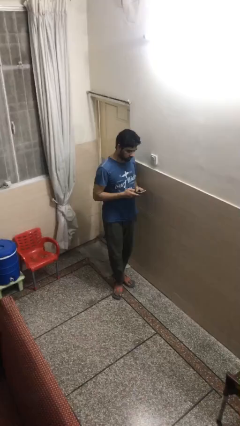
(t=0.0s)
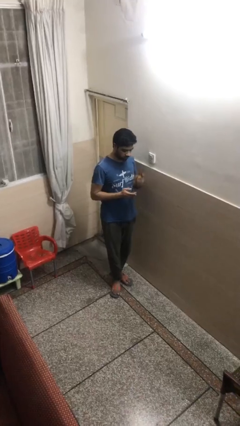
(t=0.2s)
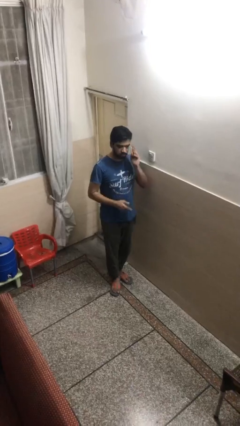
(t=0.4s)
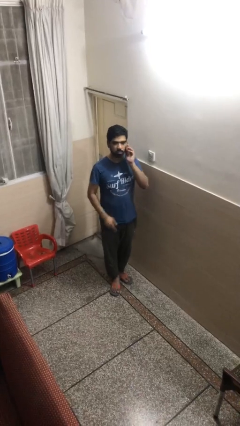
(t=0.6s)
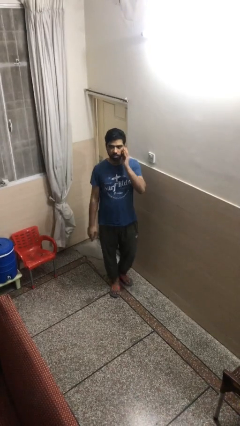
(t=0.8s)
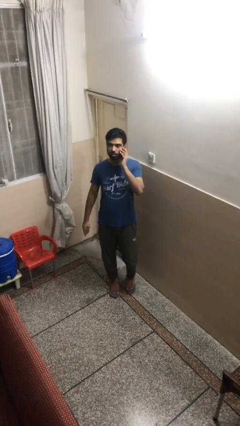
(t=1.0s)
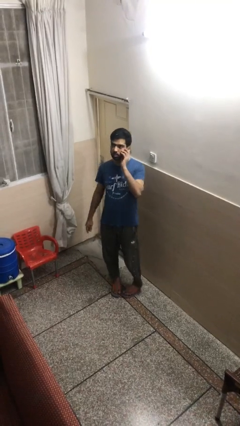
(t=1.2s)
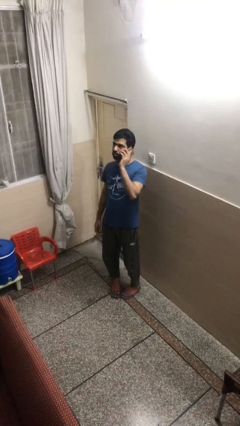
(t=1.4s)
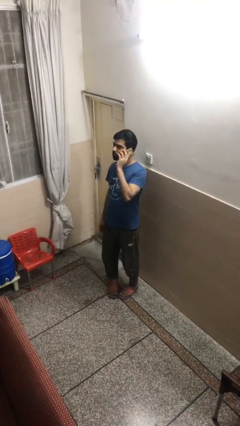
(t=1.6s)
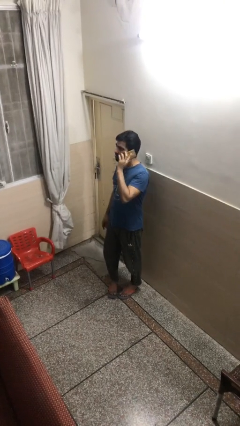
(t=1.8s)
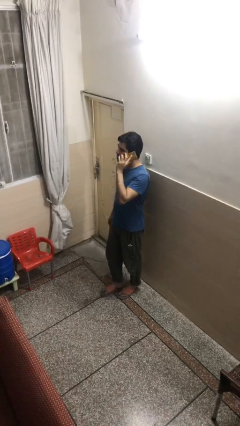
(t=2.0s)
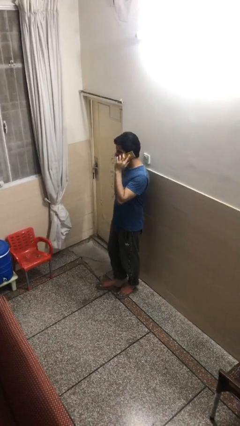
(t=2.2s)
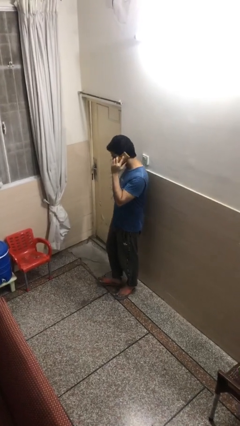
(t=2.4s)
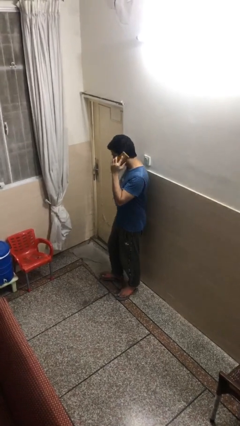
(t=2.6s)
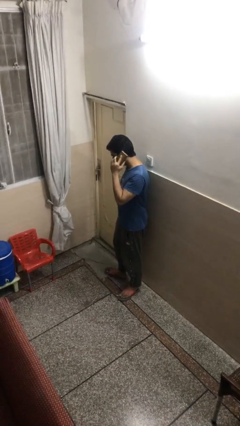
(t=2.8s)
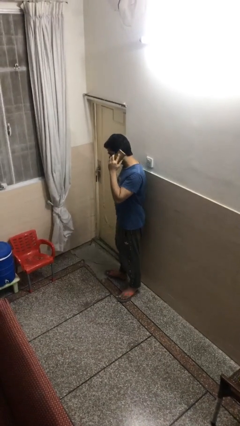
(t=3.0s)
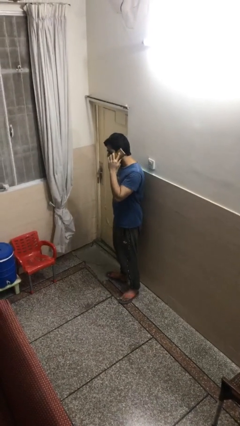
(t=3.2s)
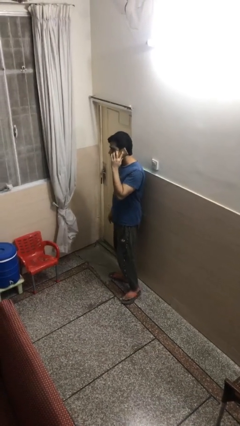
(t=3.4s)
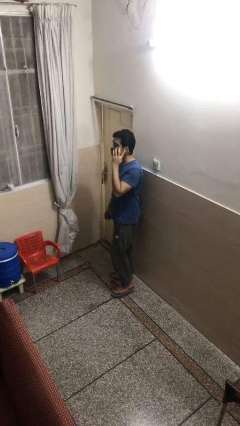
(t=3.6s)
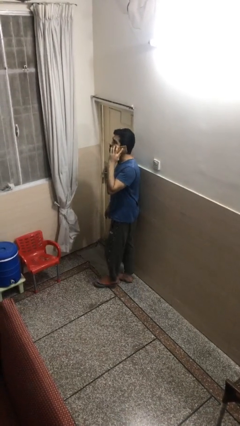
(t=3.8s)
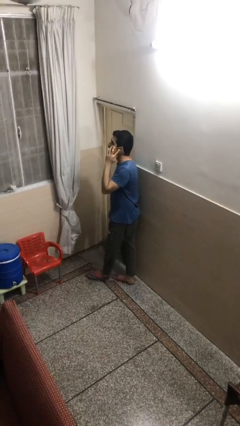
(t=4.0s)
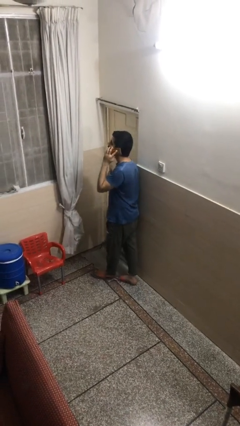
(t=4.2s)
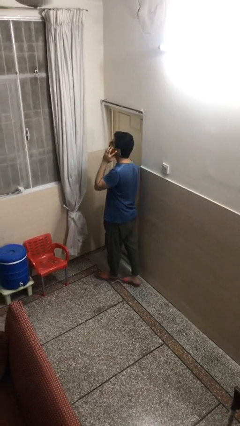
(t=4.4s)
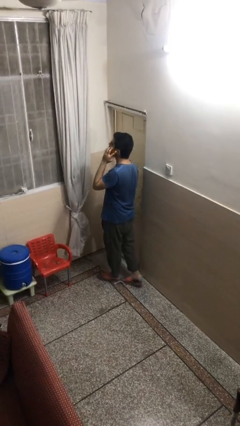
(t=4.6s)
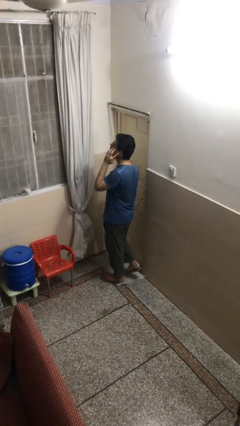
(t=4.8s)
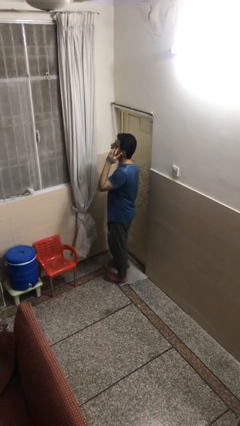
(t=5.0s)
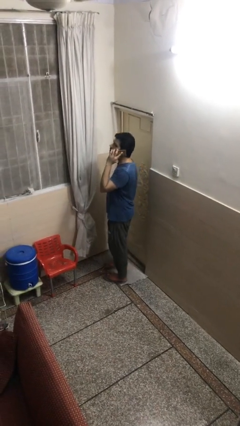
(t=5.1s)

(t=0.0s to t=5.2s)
person talks on phone

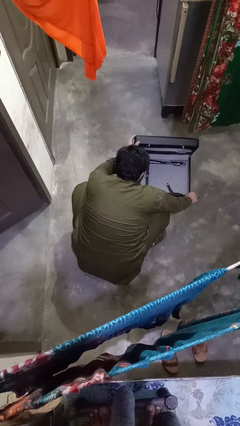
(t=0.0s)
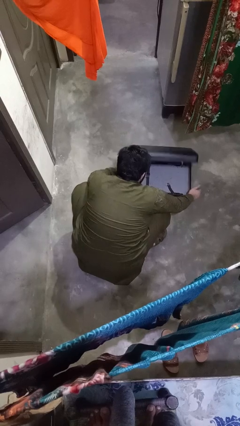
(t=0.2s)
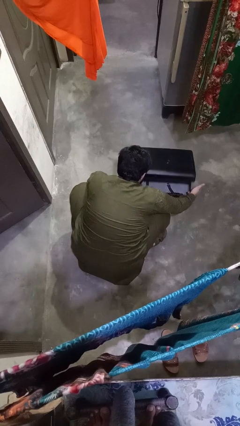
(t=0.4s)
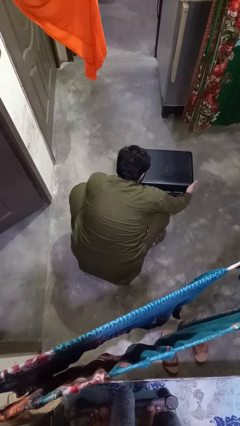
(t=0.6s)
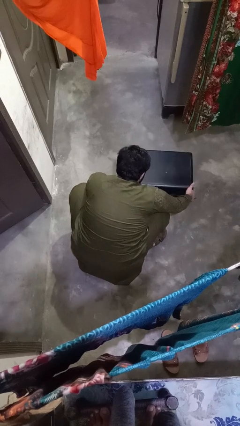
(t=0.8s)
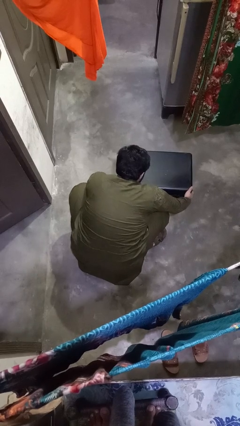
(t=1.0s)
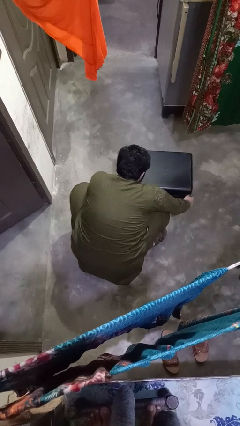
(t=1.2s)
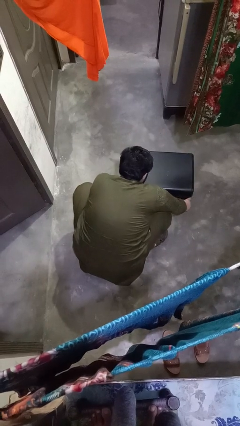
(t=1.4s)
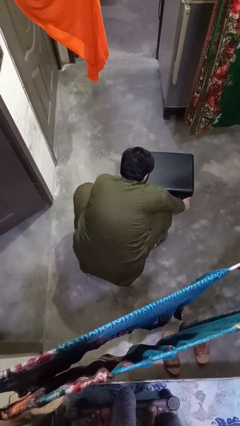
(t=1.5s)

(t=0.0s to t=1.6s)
person closes suitcase

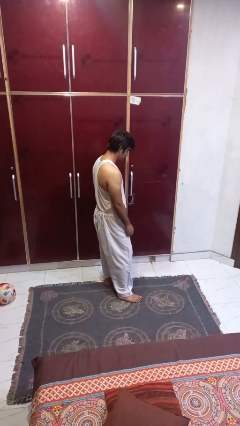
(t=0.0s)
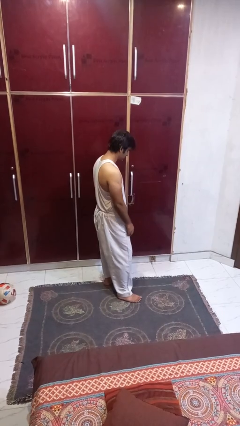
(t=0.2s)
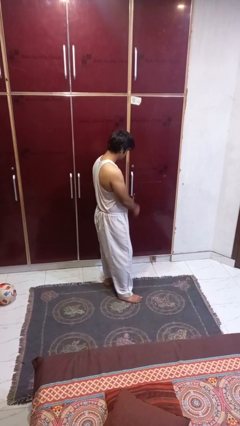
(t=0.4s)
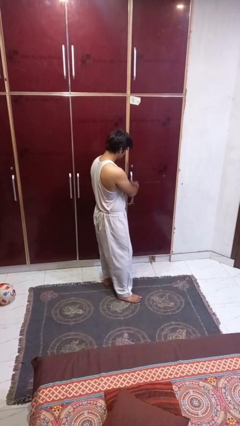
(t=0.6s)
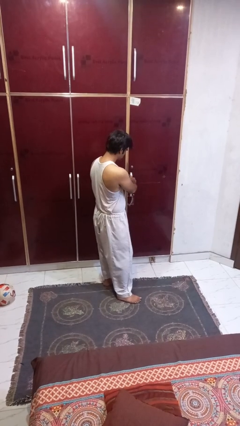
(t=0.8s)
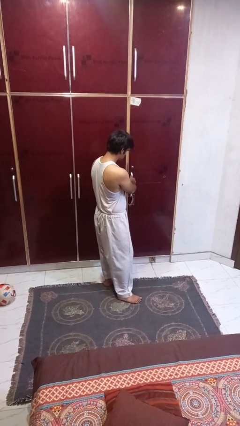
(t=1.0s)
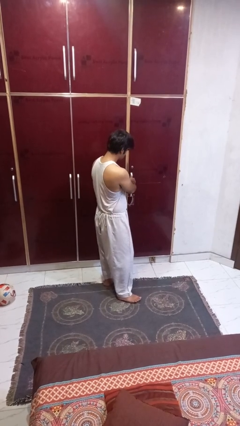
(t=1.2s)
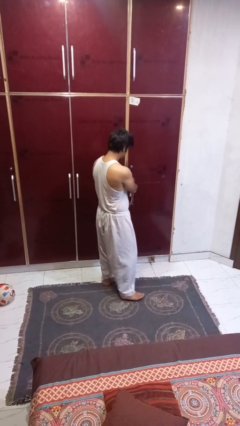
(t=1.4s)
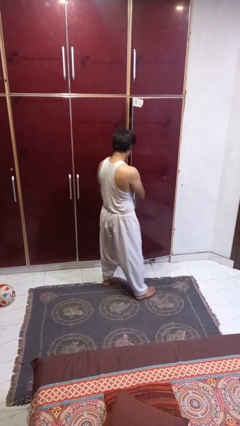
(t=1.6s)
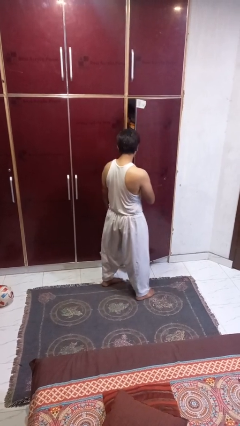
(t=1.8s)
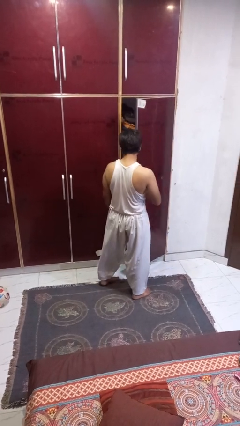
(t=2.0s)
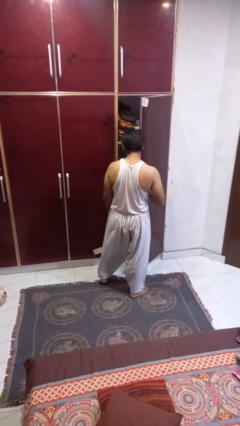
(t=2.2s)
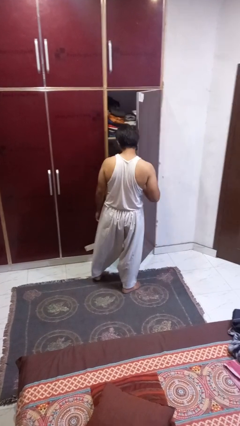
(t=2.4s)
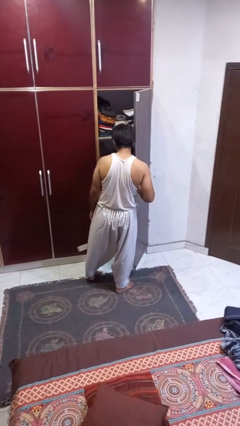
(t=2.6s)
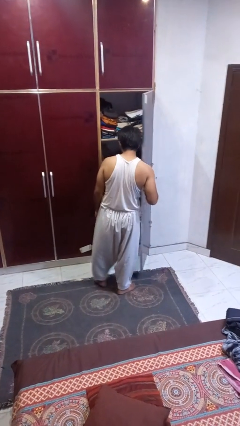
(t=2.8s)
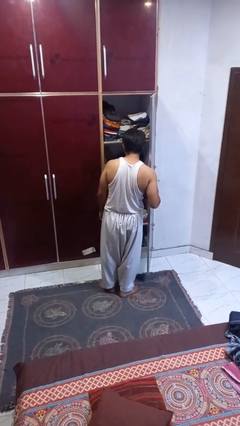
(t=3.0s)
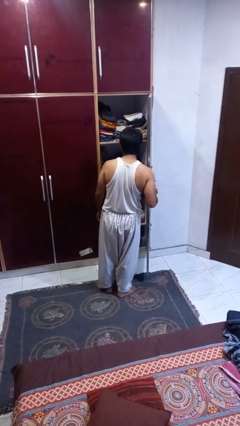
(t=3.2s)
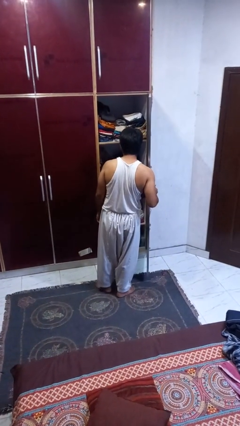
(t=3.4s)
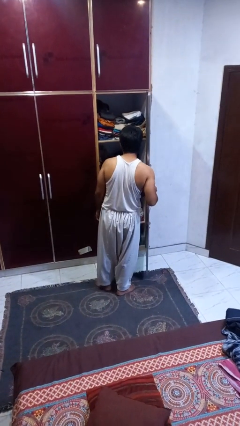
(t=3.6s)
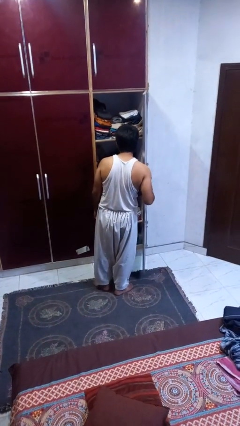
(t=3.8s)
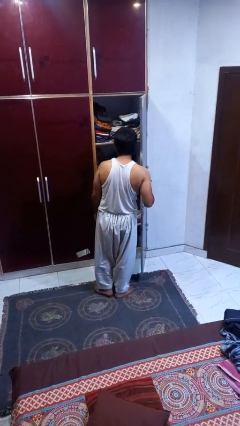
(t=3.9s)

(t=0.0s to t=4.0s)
person opens closet door

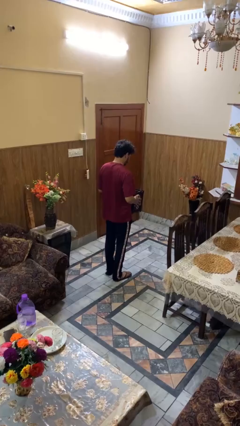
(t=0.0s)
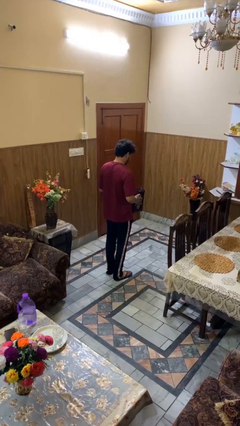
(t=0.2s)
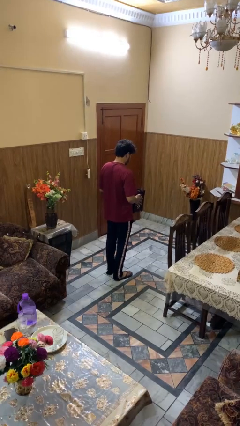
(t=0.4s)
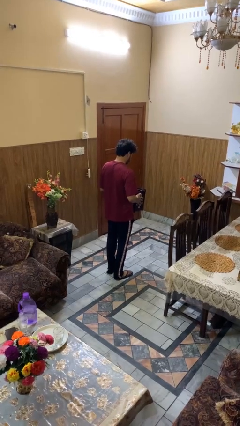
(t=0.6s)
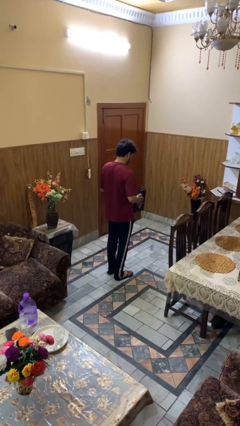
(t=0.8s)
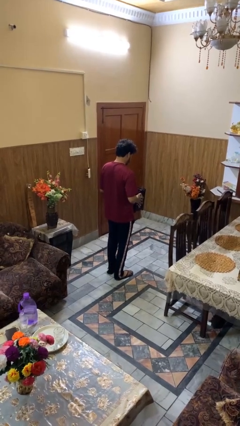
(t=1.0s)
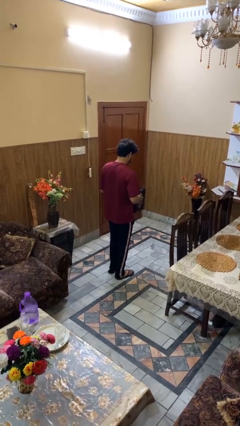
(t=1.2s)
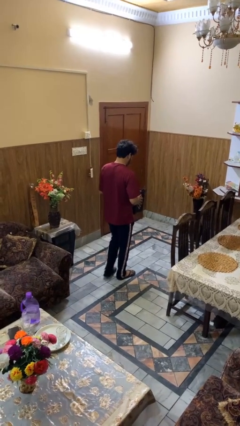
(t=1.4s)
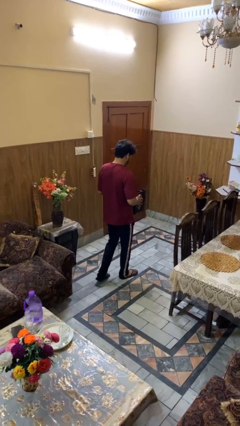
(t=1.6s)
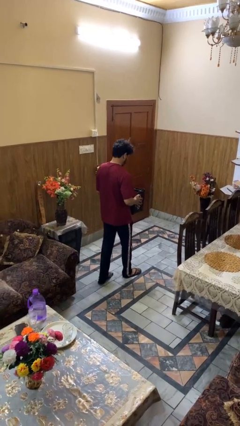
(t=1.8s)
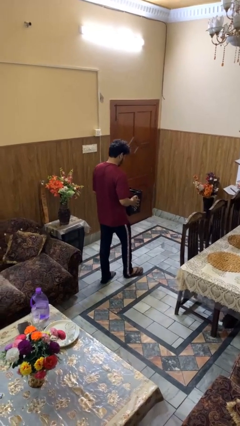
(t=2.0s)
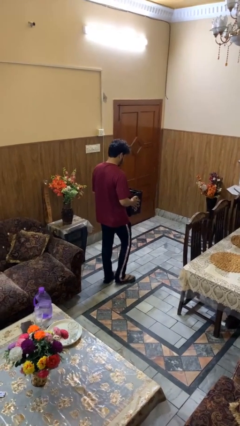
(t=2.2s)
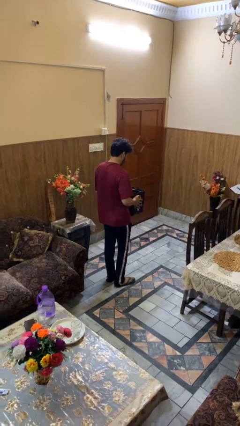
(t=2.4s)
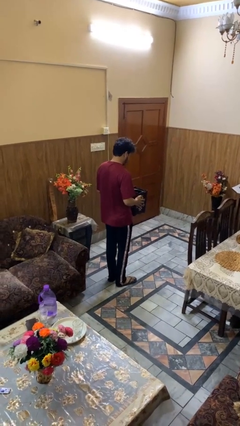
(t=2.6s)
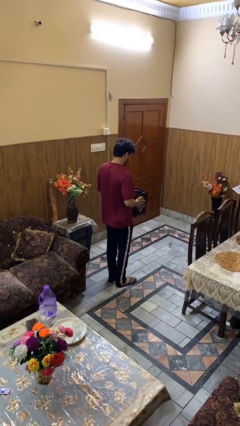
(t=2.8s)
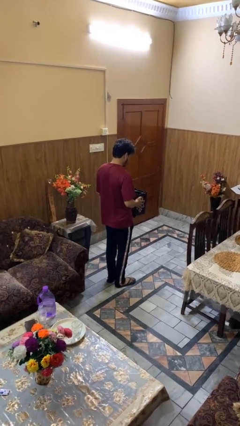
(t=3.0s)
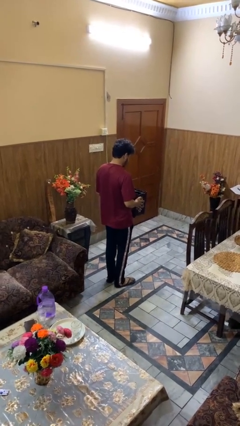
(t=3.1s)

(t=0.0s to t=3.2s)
person carries groceries

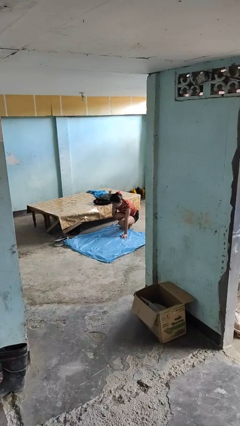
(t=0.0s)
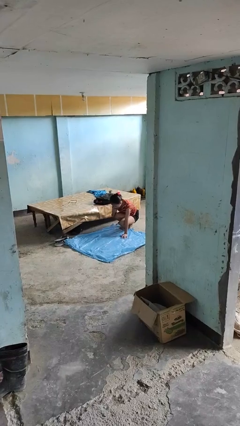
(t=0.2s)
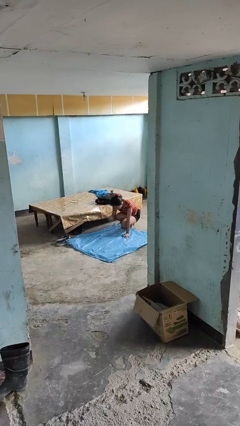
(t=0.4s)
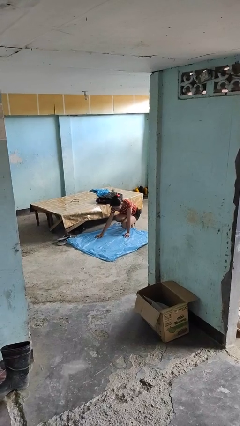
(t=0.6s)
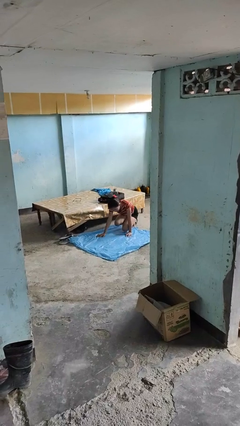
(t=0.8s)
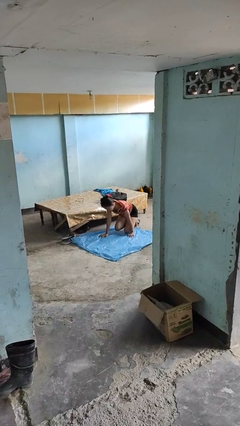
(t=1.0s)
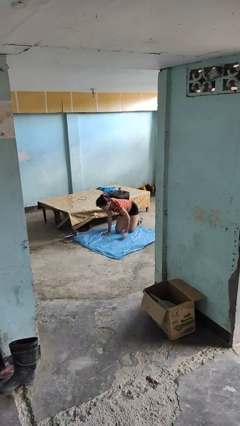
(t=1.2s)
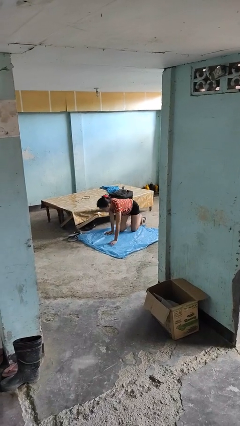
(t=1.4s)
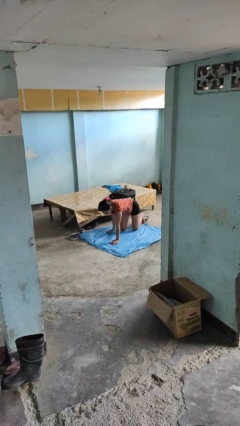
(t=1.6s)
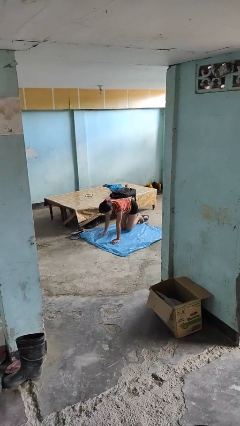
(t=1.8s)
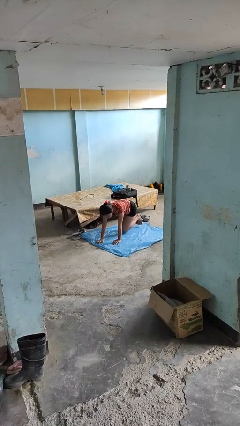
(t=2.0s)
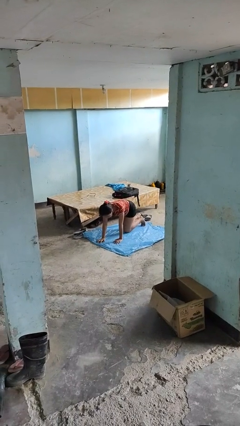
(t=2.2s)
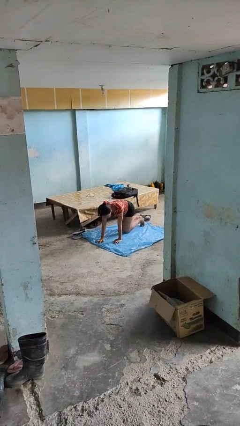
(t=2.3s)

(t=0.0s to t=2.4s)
person crawls

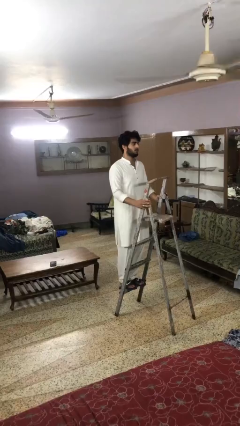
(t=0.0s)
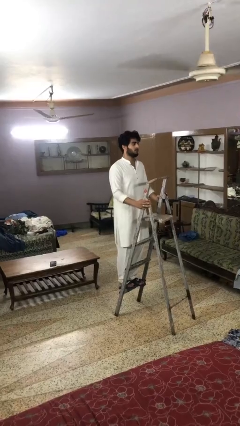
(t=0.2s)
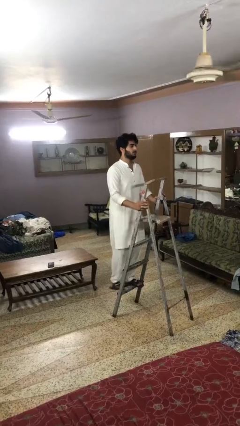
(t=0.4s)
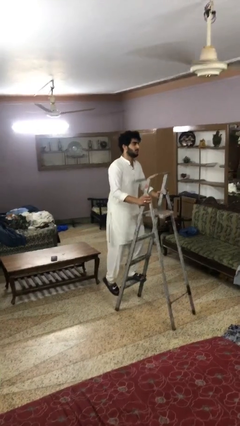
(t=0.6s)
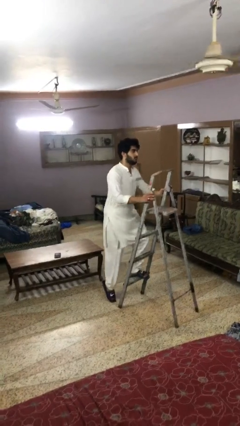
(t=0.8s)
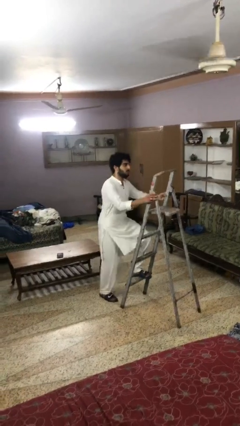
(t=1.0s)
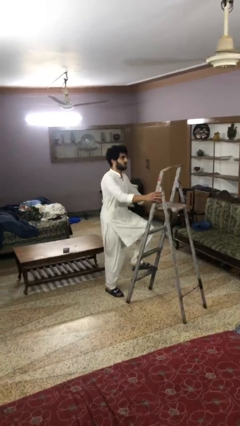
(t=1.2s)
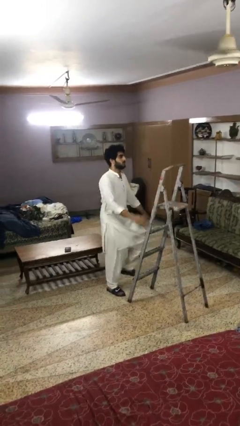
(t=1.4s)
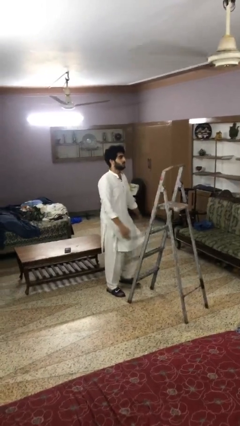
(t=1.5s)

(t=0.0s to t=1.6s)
person climbs down ladder
